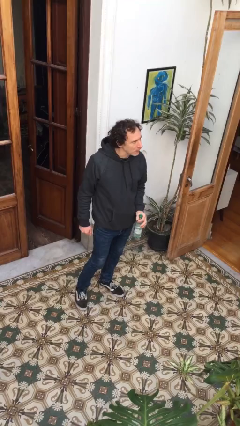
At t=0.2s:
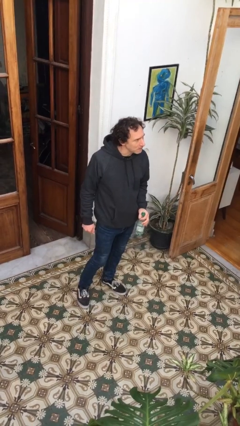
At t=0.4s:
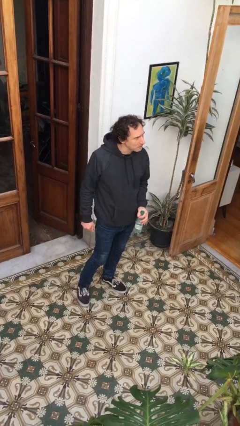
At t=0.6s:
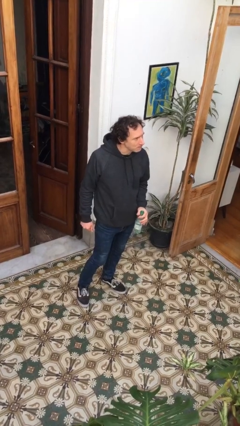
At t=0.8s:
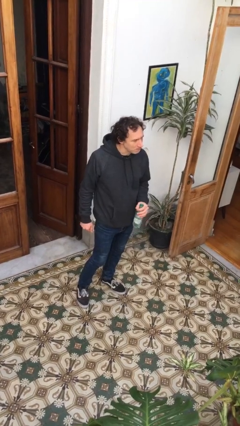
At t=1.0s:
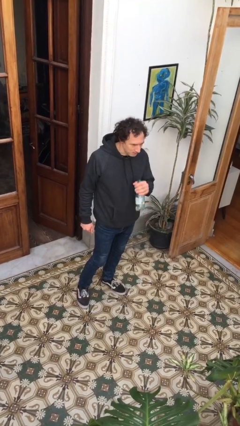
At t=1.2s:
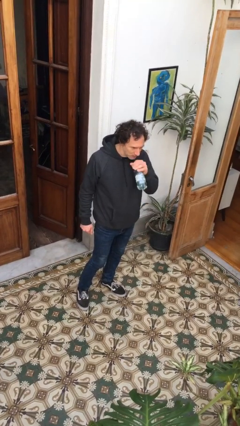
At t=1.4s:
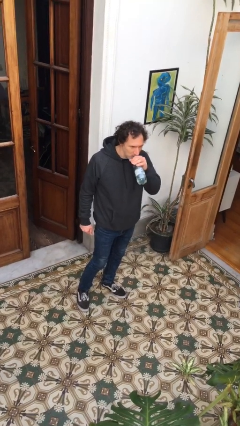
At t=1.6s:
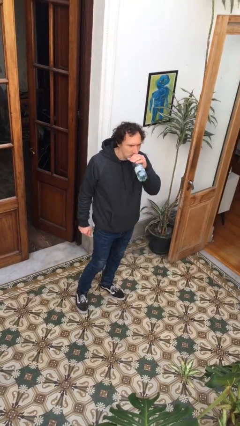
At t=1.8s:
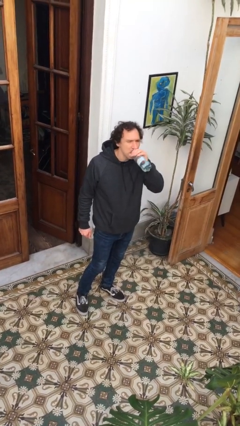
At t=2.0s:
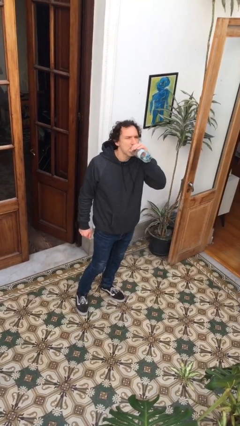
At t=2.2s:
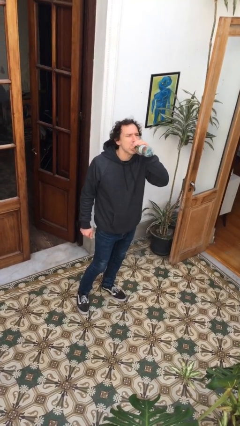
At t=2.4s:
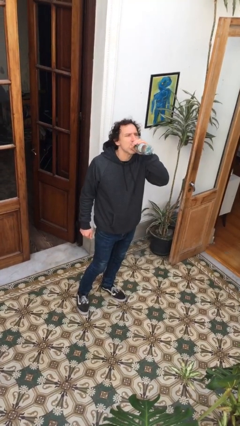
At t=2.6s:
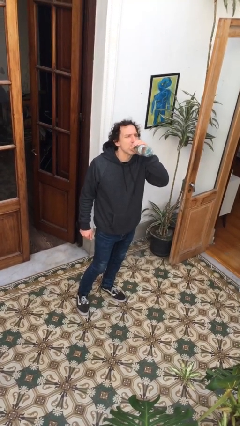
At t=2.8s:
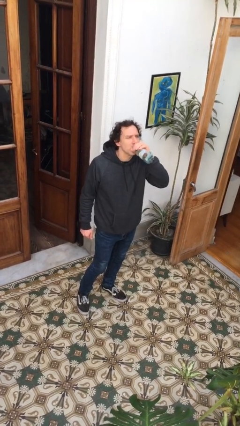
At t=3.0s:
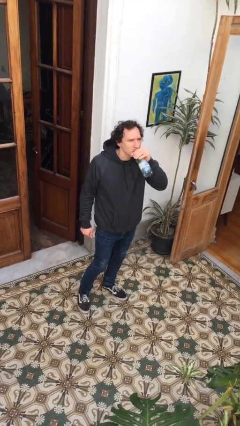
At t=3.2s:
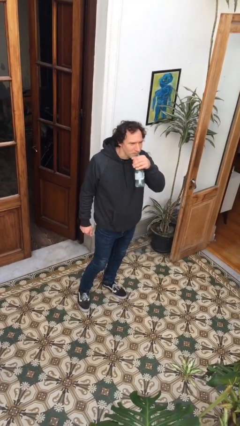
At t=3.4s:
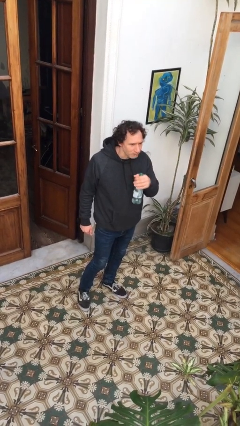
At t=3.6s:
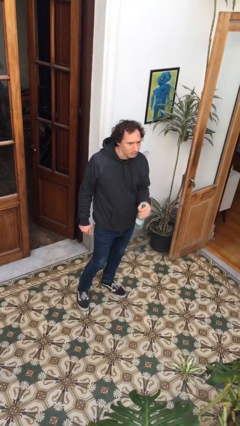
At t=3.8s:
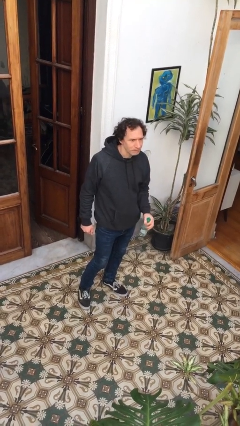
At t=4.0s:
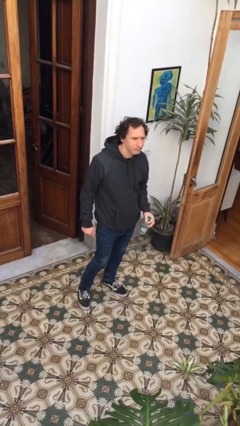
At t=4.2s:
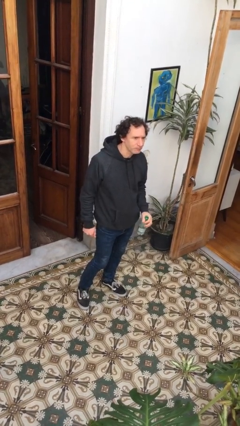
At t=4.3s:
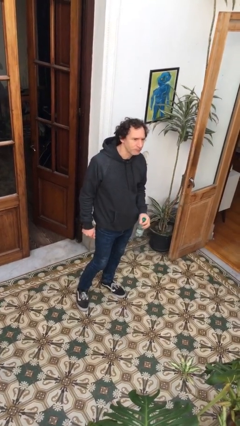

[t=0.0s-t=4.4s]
person drinks from bottle

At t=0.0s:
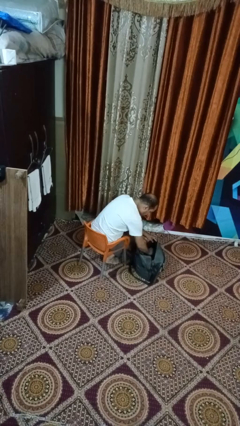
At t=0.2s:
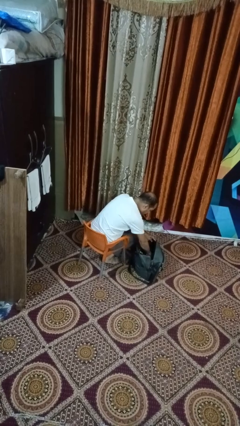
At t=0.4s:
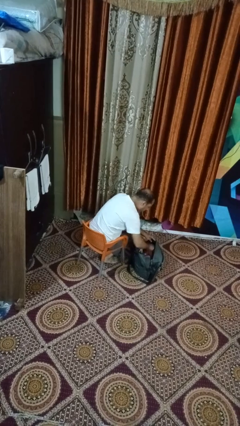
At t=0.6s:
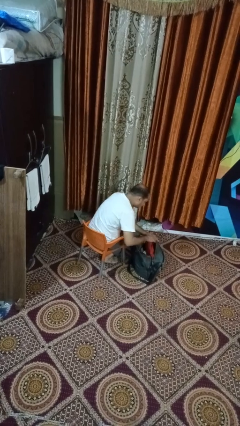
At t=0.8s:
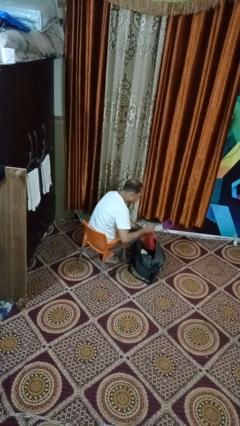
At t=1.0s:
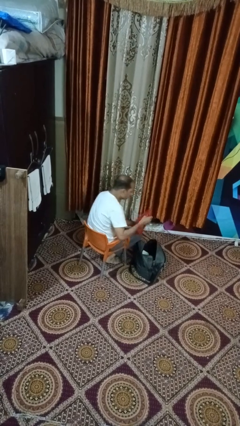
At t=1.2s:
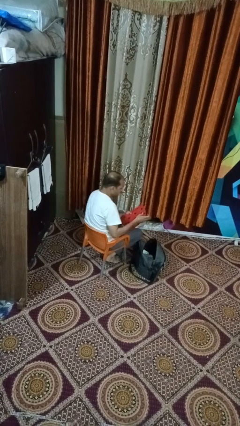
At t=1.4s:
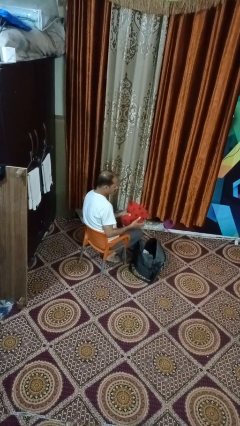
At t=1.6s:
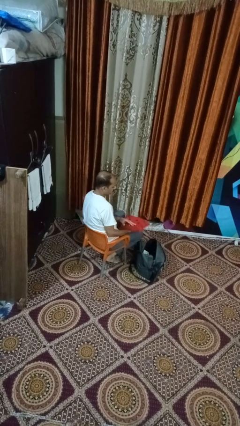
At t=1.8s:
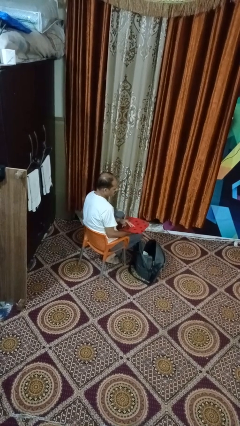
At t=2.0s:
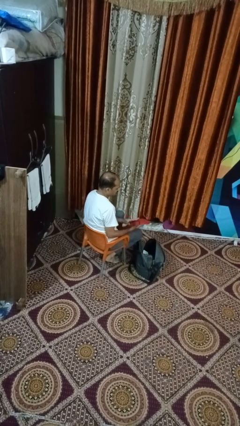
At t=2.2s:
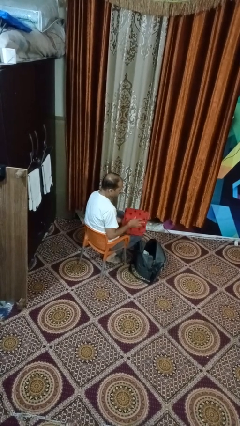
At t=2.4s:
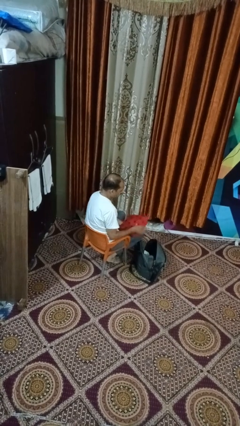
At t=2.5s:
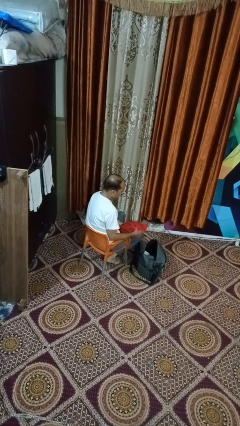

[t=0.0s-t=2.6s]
person takes object from backpack

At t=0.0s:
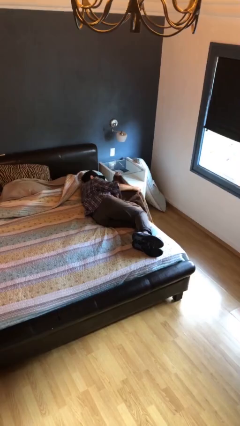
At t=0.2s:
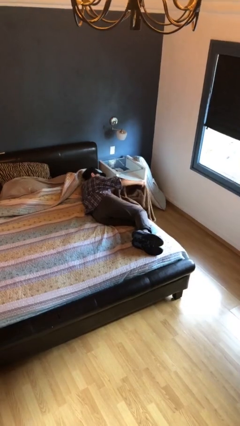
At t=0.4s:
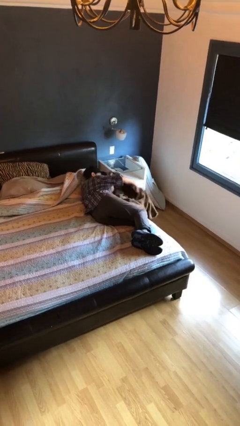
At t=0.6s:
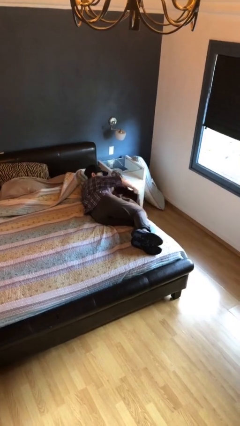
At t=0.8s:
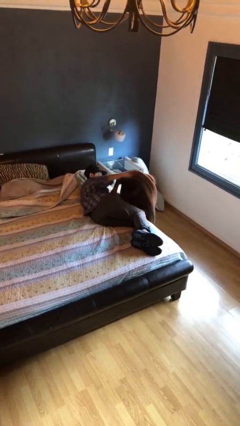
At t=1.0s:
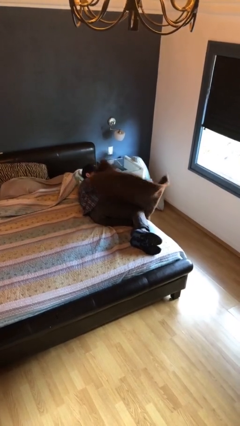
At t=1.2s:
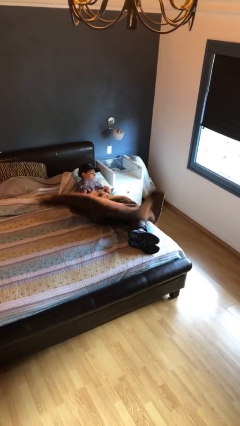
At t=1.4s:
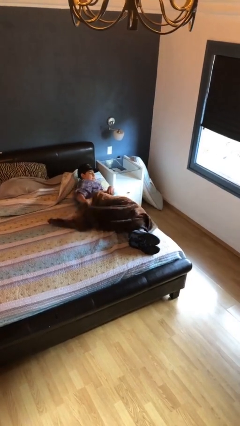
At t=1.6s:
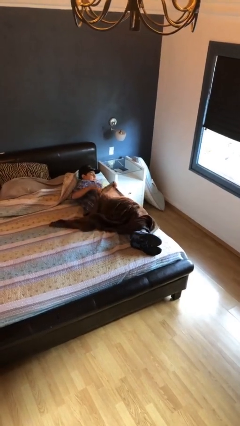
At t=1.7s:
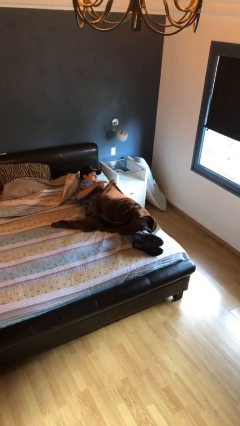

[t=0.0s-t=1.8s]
person covers with blanket

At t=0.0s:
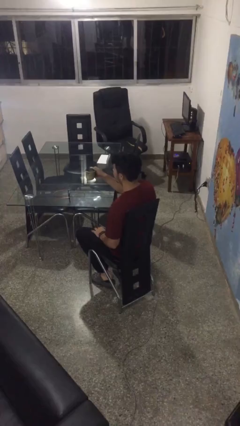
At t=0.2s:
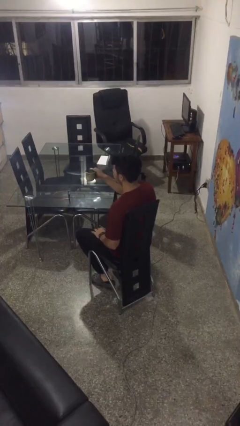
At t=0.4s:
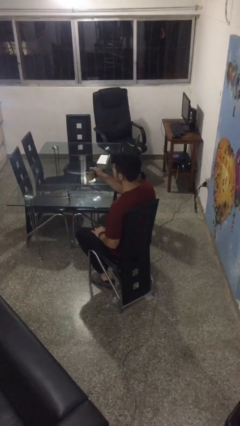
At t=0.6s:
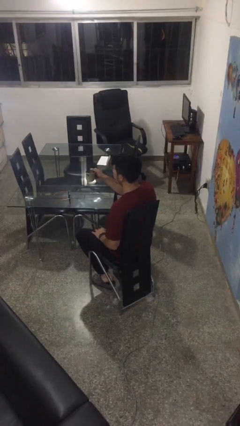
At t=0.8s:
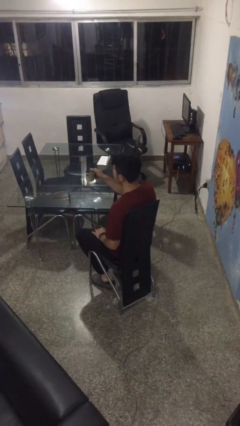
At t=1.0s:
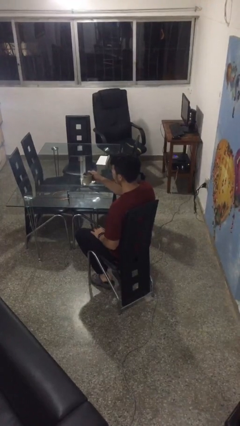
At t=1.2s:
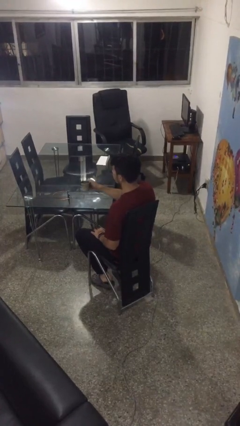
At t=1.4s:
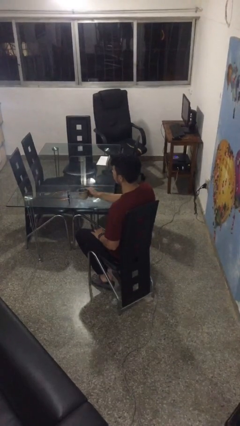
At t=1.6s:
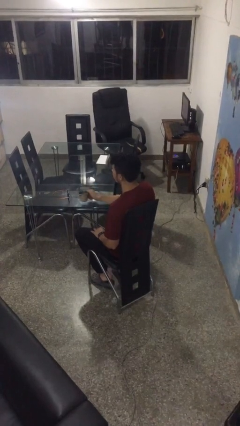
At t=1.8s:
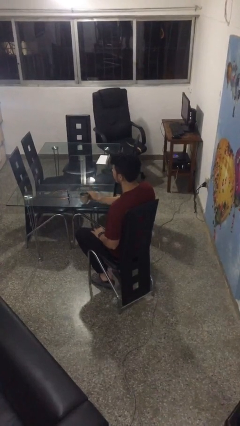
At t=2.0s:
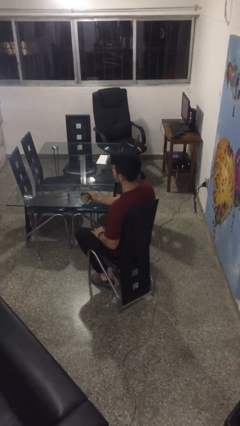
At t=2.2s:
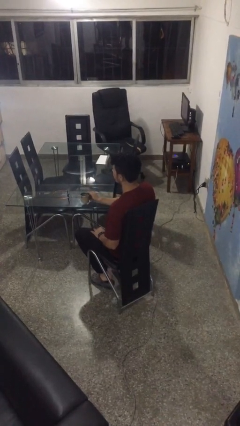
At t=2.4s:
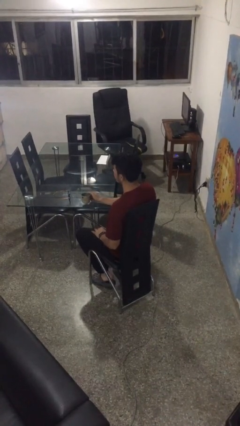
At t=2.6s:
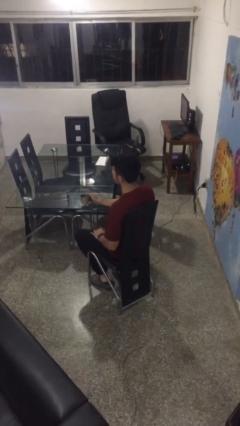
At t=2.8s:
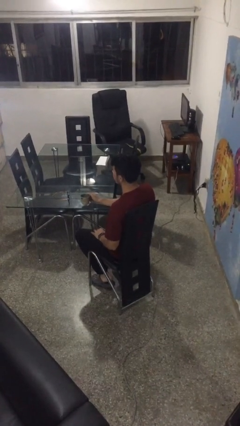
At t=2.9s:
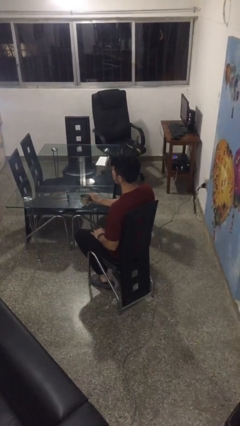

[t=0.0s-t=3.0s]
person puts down object on table

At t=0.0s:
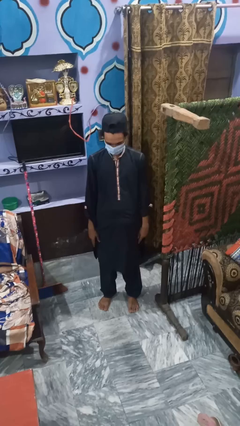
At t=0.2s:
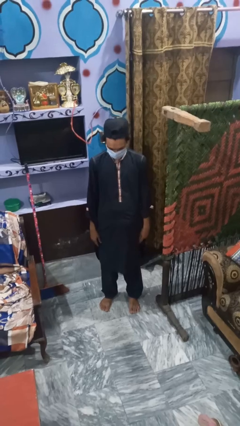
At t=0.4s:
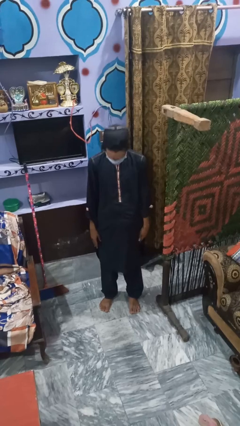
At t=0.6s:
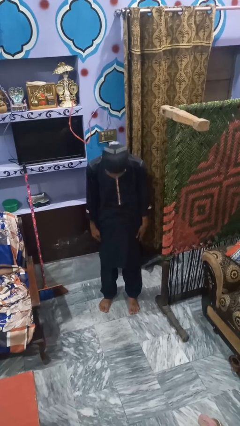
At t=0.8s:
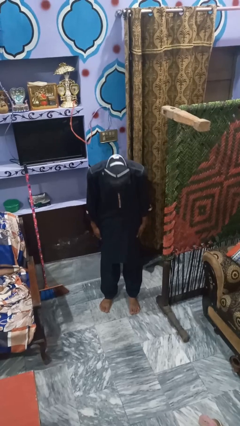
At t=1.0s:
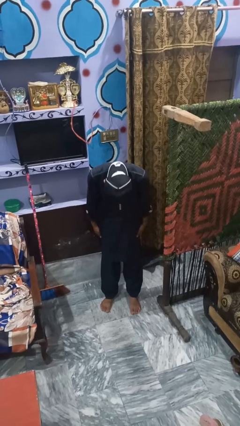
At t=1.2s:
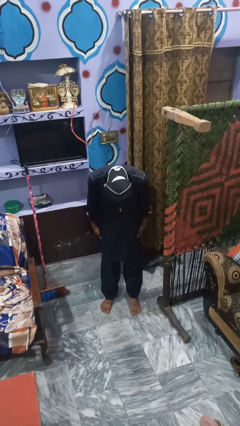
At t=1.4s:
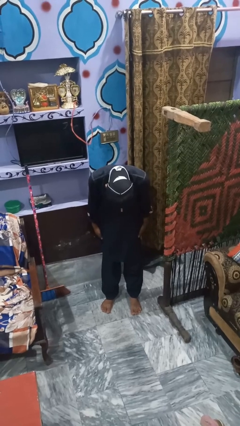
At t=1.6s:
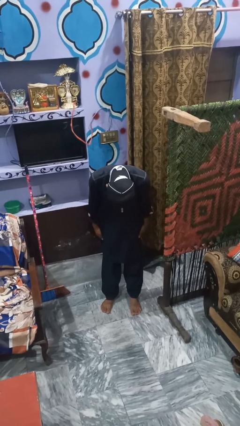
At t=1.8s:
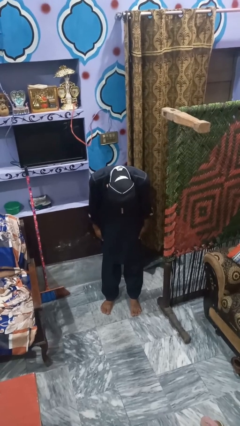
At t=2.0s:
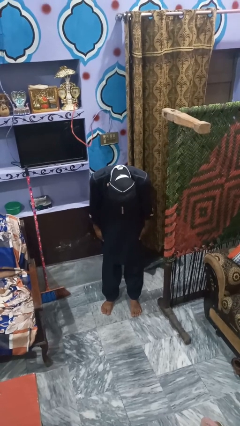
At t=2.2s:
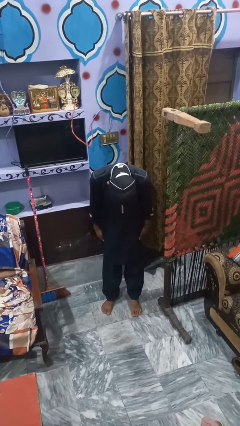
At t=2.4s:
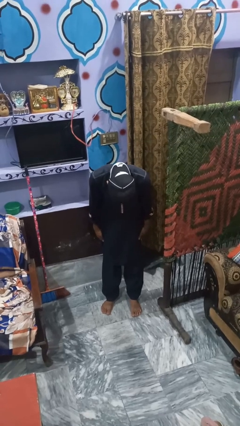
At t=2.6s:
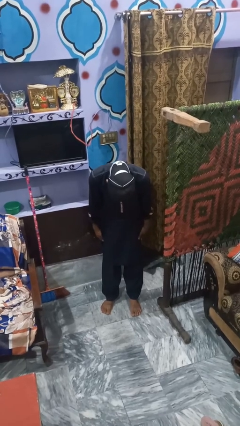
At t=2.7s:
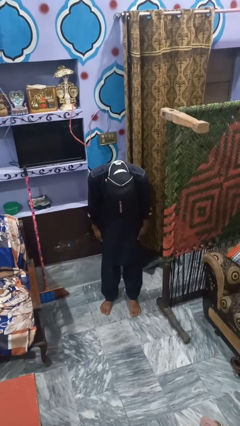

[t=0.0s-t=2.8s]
person bows

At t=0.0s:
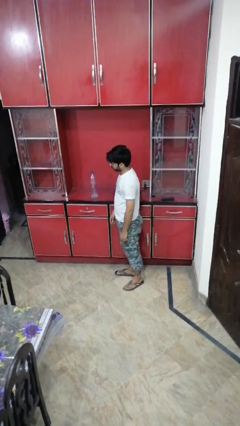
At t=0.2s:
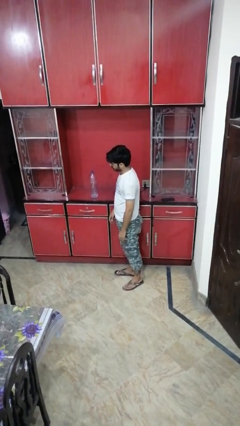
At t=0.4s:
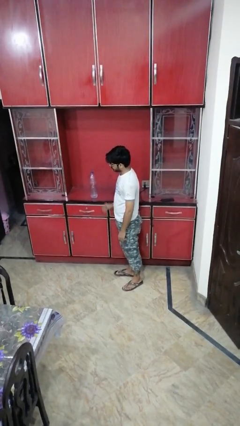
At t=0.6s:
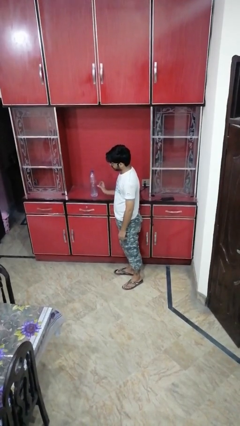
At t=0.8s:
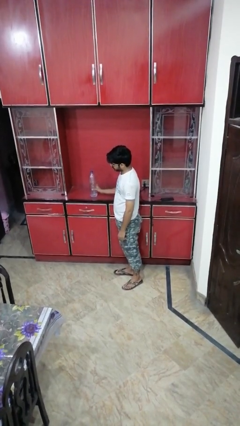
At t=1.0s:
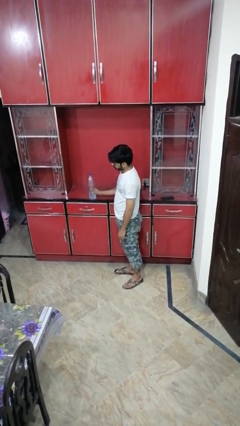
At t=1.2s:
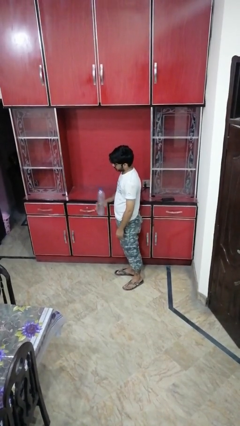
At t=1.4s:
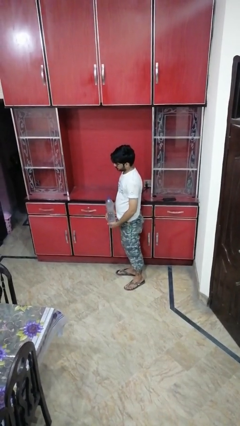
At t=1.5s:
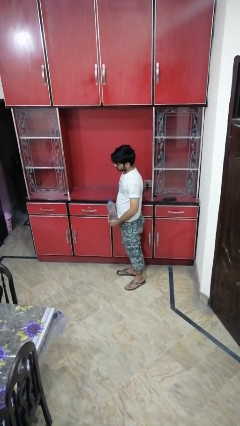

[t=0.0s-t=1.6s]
person picks up object from countertop

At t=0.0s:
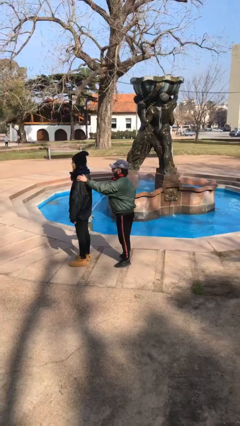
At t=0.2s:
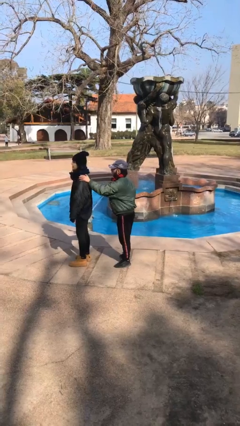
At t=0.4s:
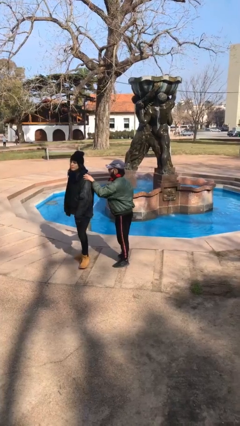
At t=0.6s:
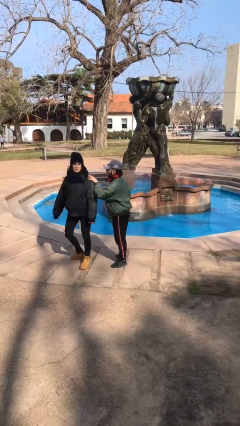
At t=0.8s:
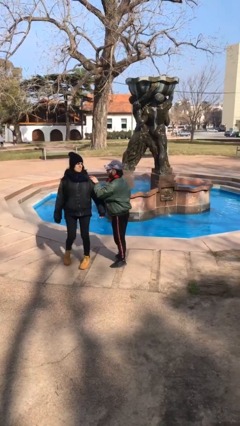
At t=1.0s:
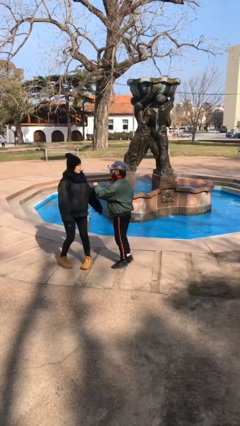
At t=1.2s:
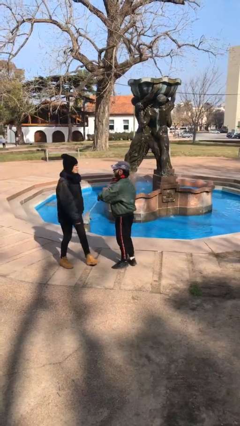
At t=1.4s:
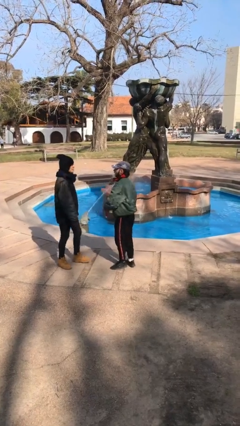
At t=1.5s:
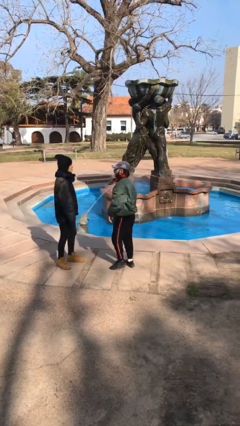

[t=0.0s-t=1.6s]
person spins person around
